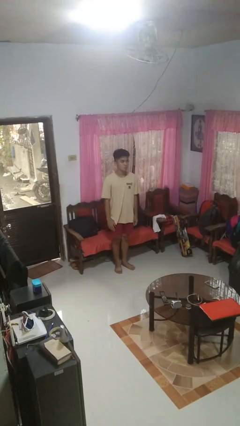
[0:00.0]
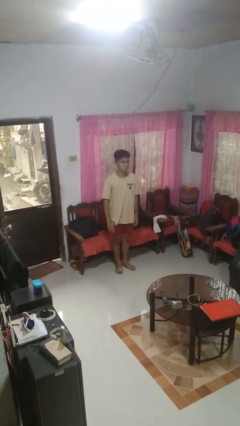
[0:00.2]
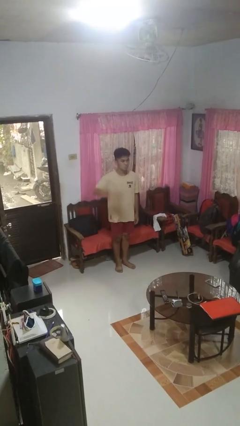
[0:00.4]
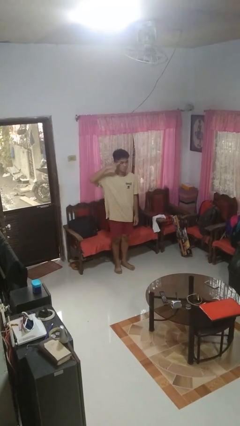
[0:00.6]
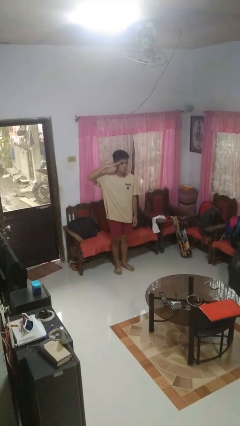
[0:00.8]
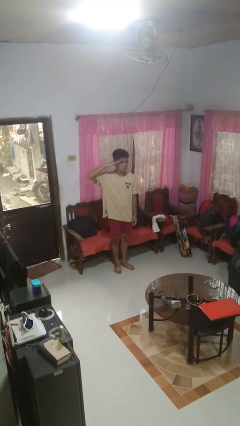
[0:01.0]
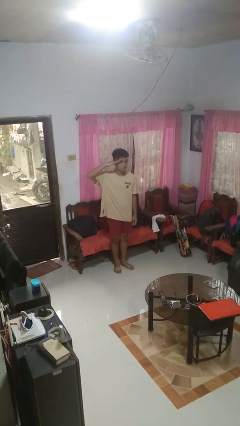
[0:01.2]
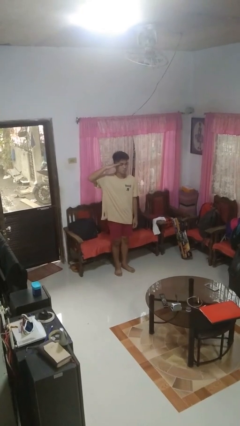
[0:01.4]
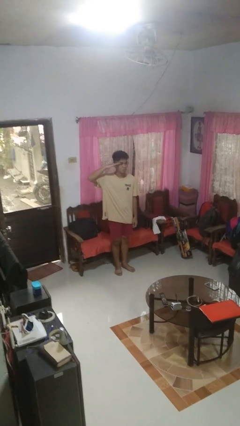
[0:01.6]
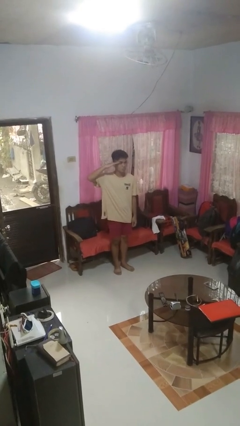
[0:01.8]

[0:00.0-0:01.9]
person salutes

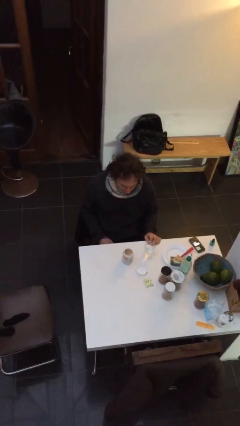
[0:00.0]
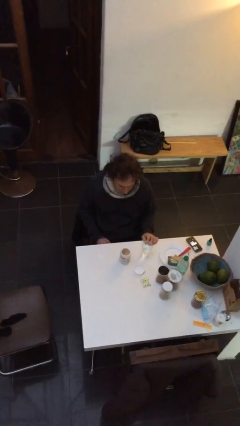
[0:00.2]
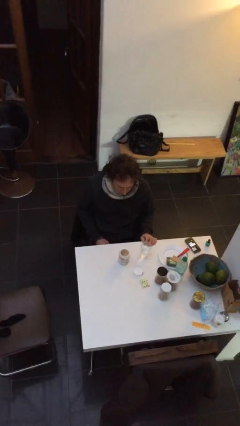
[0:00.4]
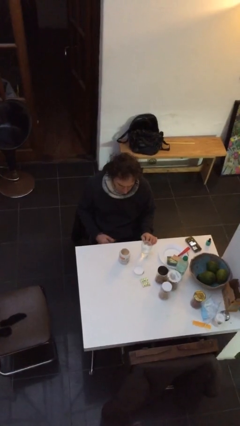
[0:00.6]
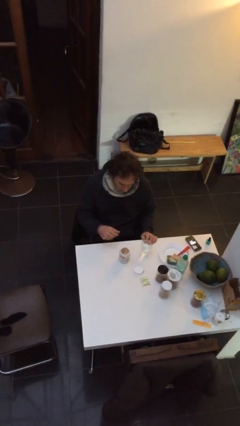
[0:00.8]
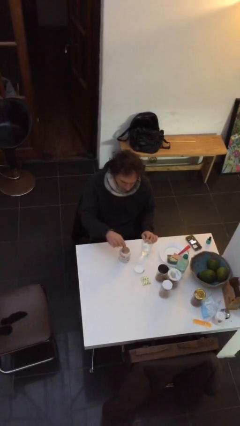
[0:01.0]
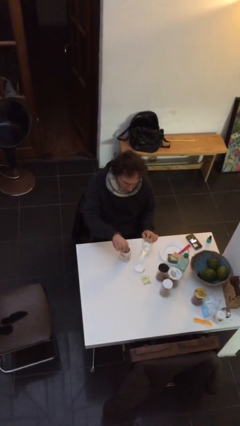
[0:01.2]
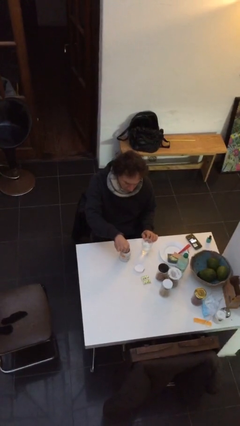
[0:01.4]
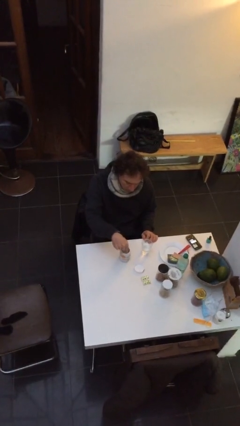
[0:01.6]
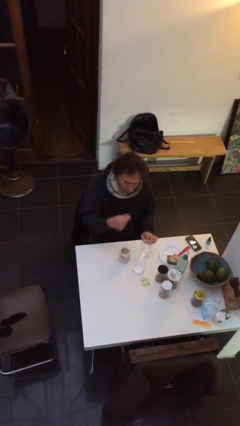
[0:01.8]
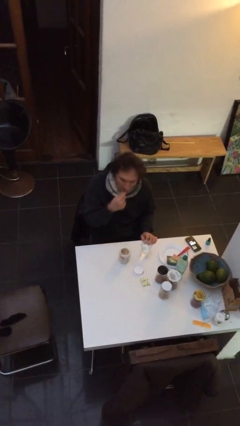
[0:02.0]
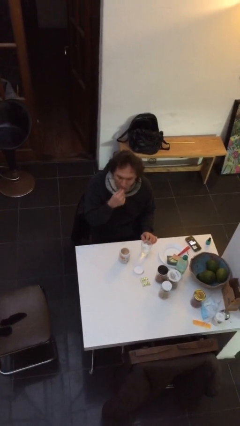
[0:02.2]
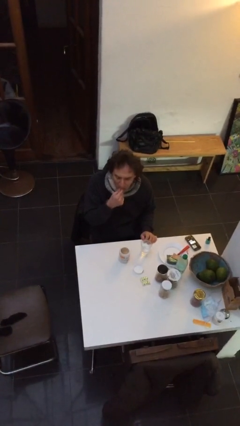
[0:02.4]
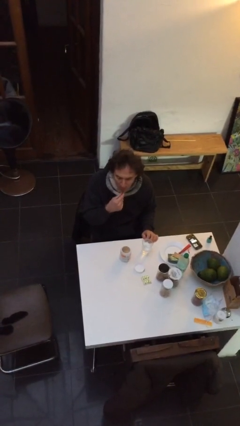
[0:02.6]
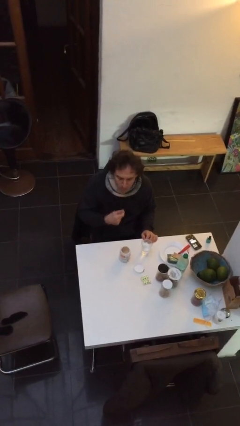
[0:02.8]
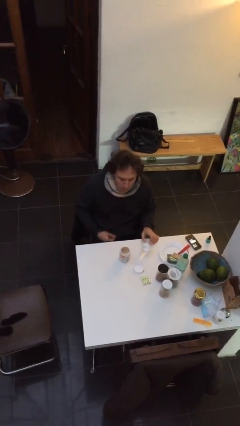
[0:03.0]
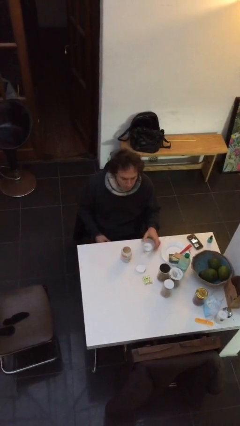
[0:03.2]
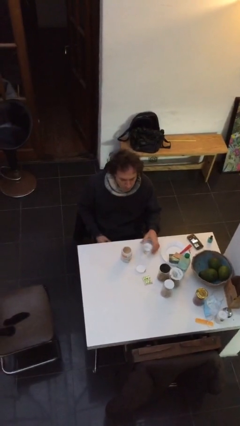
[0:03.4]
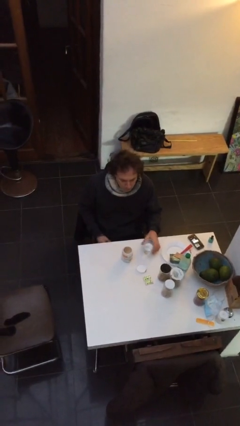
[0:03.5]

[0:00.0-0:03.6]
person takes medicine pills

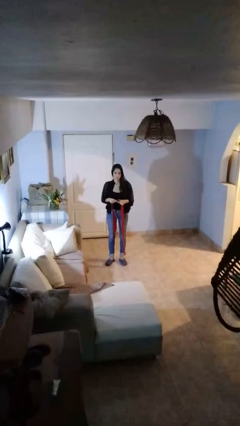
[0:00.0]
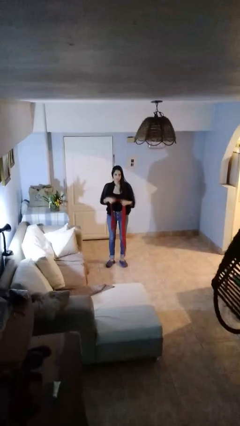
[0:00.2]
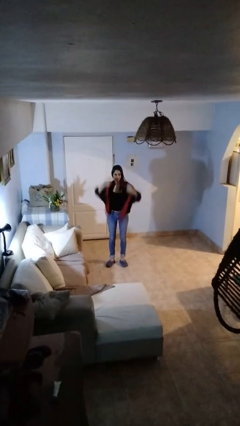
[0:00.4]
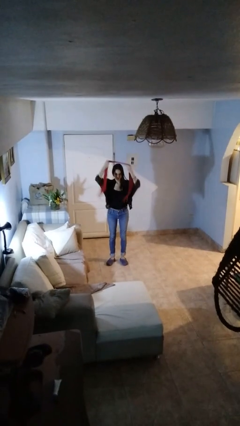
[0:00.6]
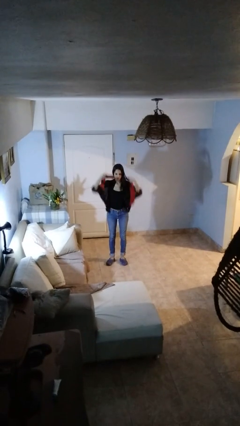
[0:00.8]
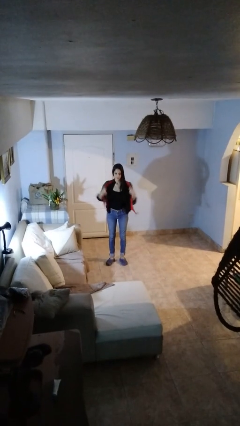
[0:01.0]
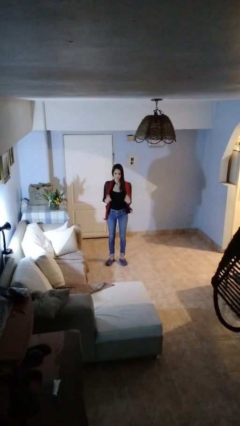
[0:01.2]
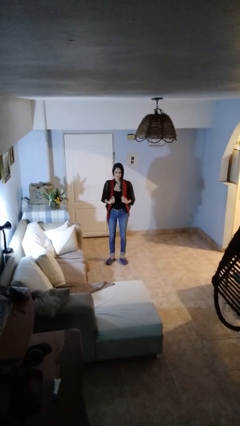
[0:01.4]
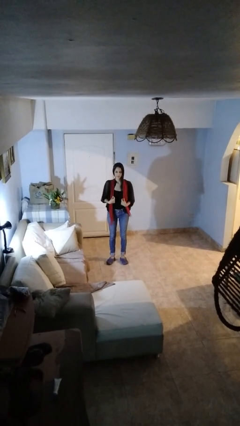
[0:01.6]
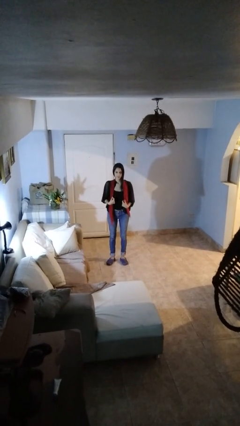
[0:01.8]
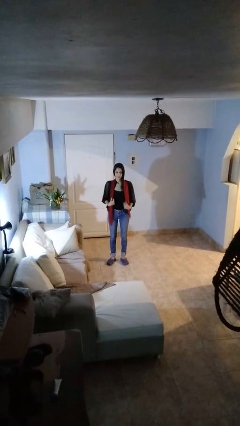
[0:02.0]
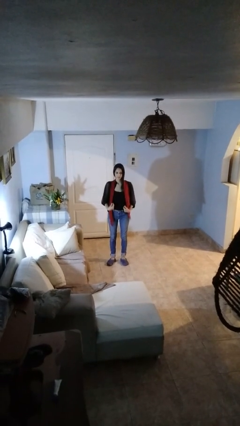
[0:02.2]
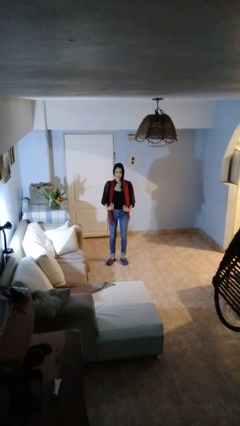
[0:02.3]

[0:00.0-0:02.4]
person puts on scarf

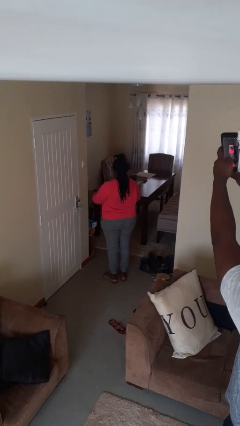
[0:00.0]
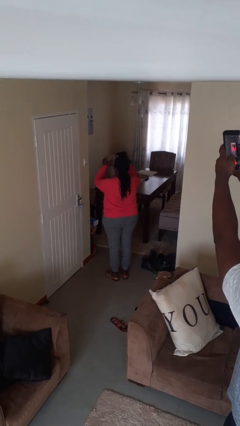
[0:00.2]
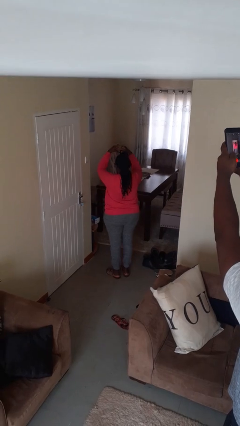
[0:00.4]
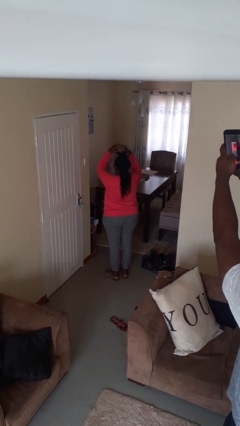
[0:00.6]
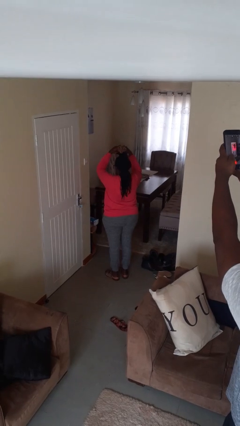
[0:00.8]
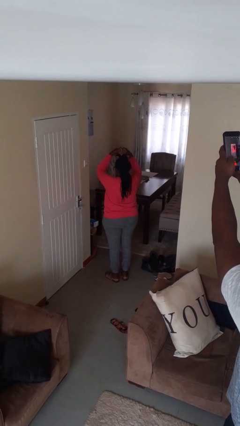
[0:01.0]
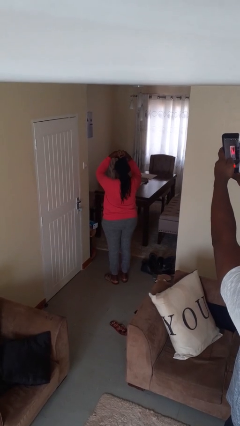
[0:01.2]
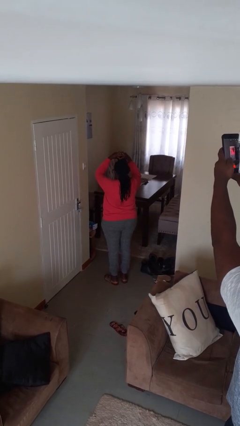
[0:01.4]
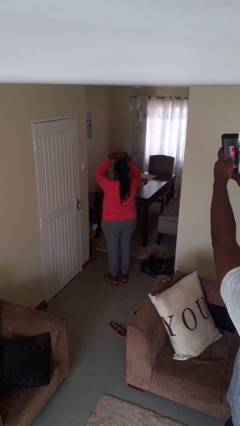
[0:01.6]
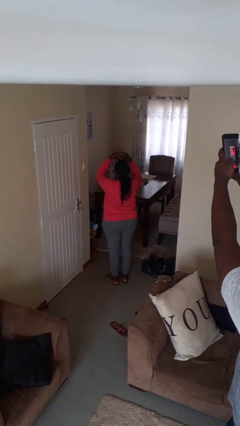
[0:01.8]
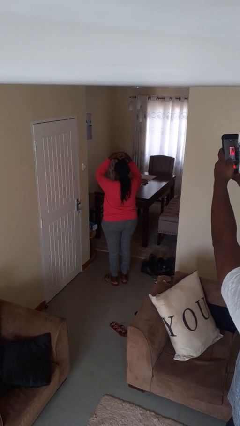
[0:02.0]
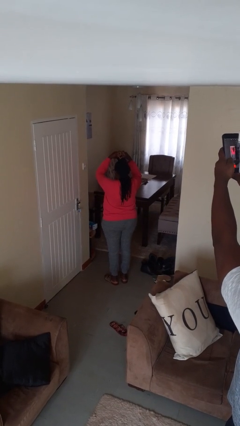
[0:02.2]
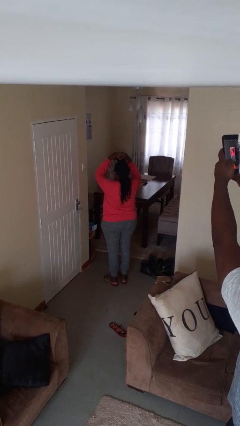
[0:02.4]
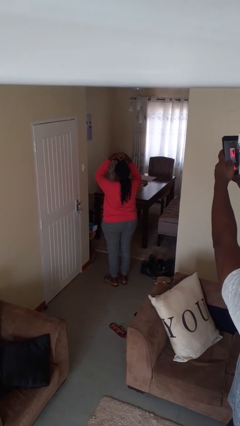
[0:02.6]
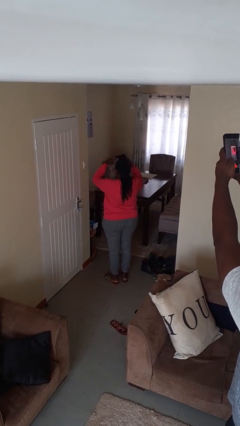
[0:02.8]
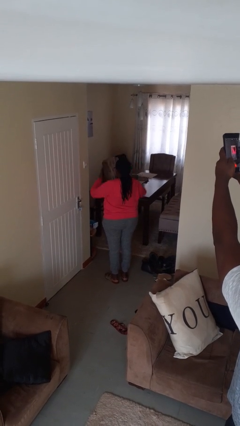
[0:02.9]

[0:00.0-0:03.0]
person gestures heart

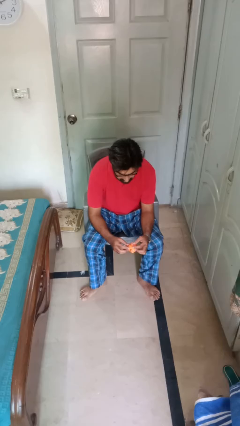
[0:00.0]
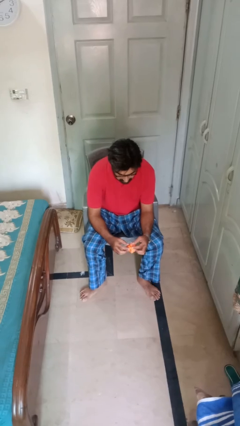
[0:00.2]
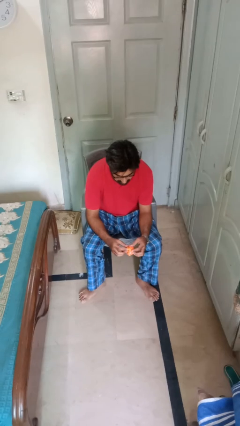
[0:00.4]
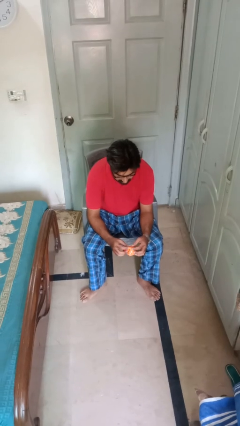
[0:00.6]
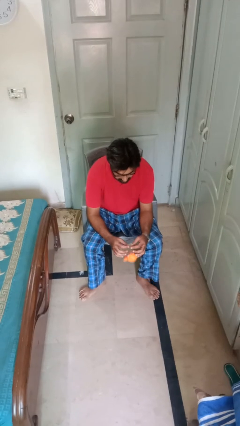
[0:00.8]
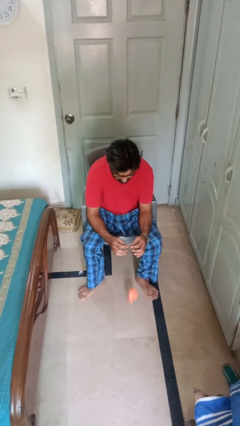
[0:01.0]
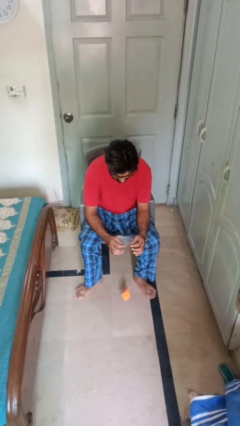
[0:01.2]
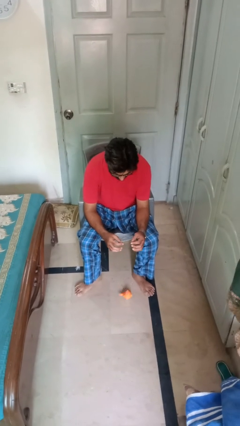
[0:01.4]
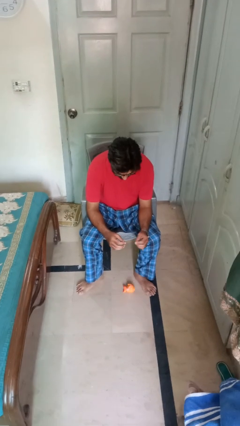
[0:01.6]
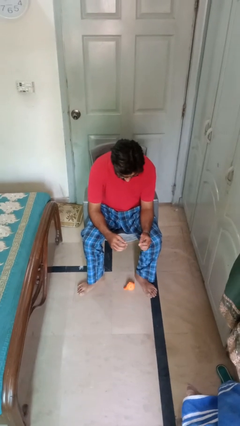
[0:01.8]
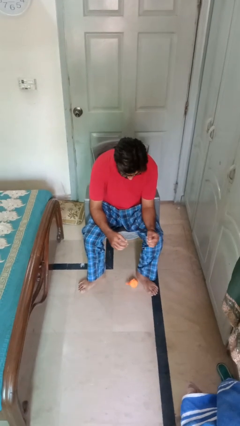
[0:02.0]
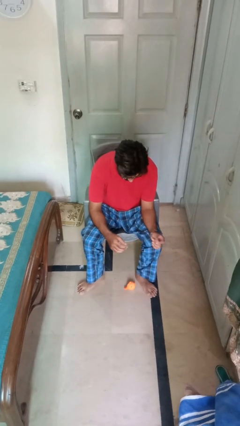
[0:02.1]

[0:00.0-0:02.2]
person drops object

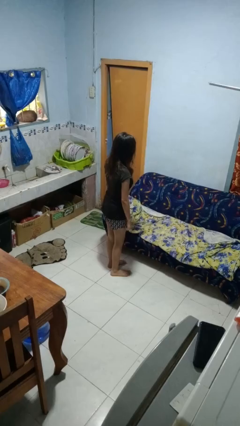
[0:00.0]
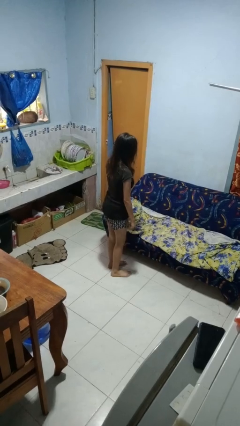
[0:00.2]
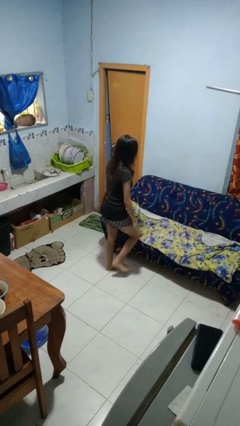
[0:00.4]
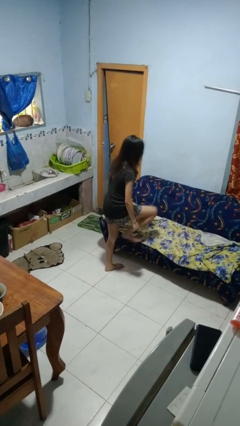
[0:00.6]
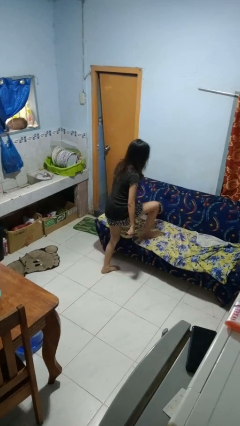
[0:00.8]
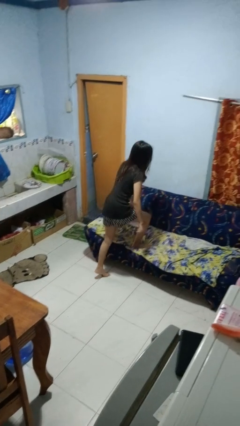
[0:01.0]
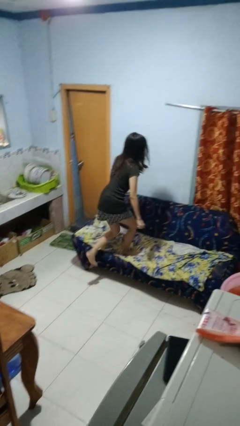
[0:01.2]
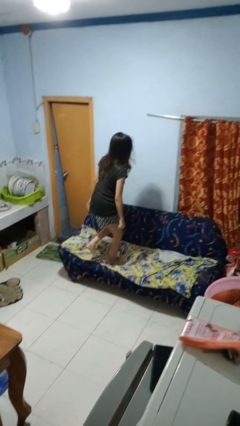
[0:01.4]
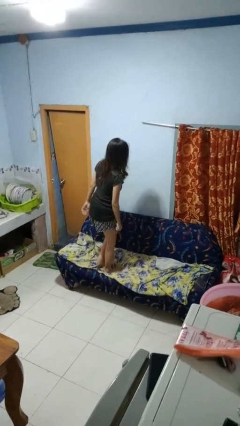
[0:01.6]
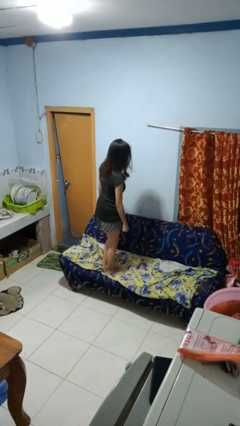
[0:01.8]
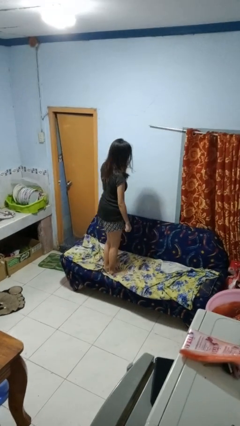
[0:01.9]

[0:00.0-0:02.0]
person climbs on couch

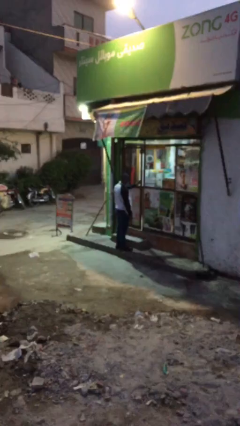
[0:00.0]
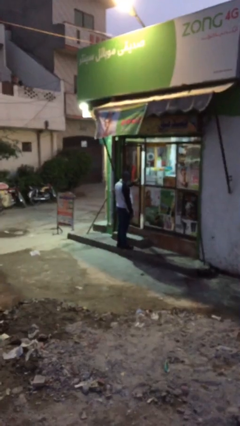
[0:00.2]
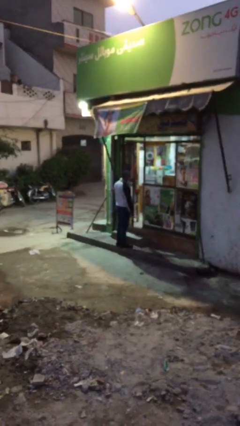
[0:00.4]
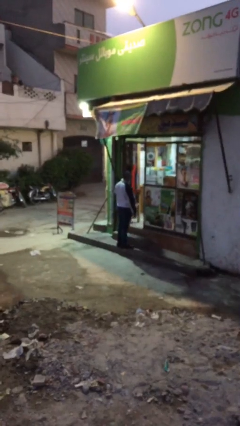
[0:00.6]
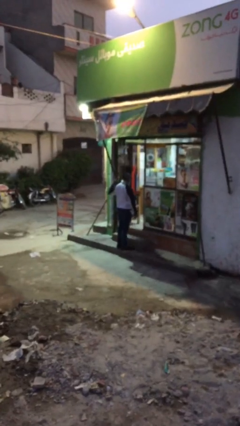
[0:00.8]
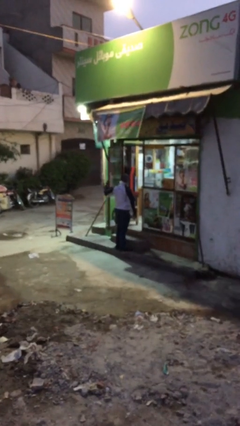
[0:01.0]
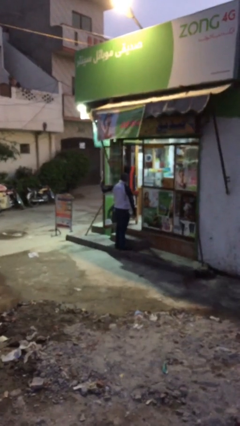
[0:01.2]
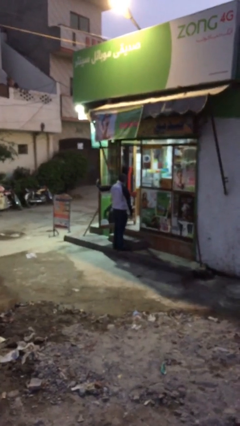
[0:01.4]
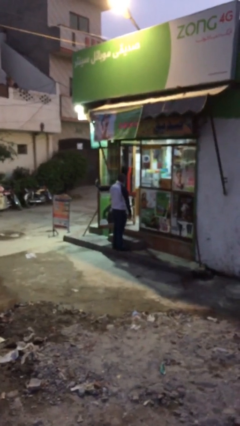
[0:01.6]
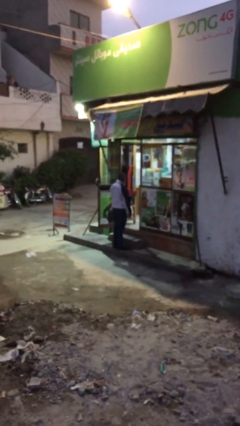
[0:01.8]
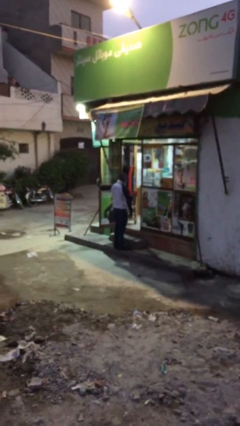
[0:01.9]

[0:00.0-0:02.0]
person opens facility door

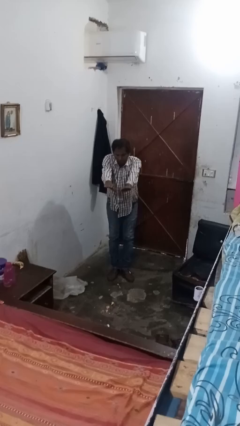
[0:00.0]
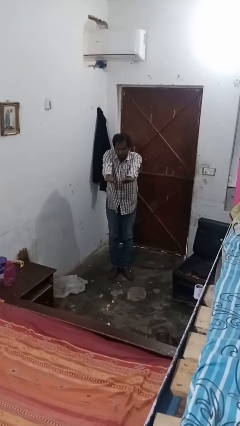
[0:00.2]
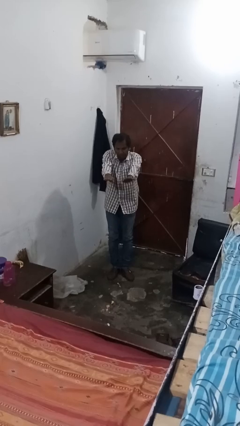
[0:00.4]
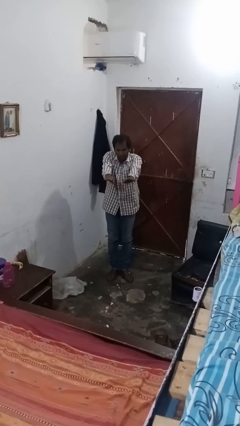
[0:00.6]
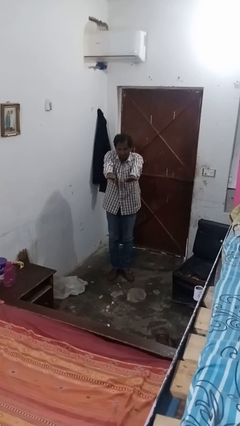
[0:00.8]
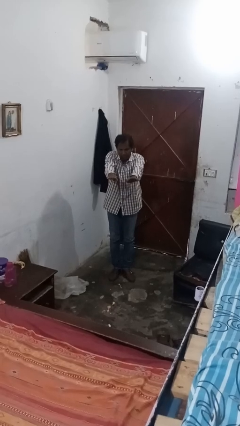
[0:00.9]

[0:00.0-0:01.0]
person stands up
